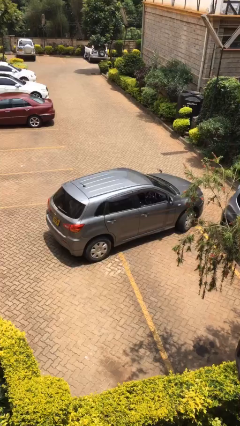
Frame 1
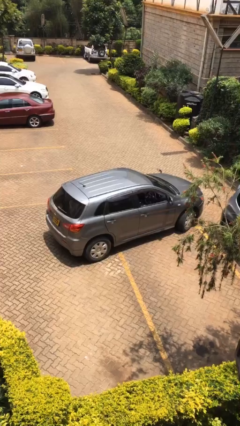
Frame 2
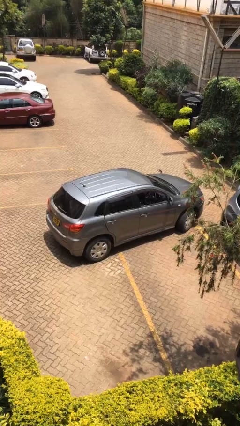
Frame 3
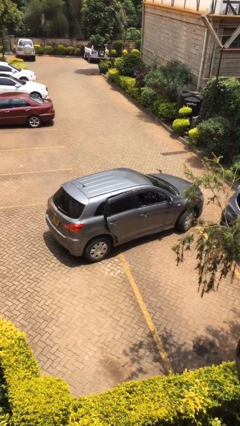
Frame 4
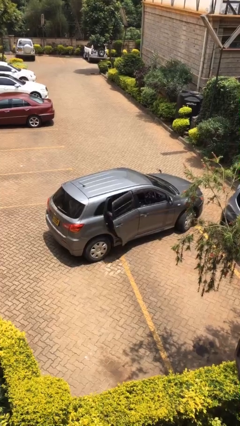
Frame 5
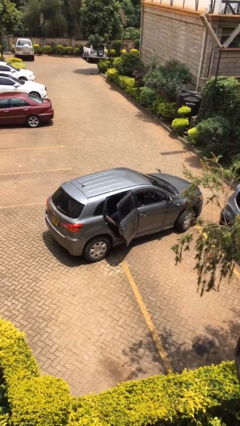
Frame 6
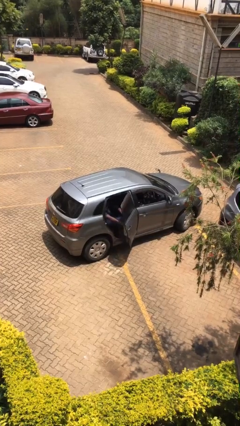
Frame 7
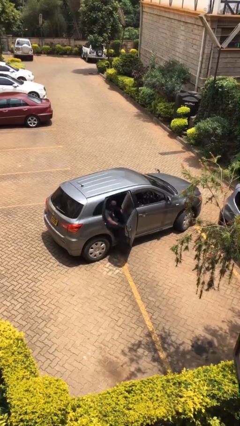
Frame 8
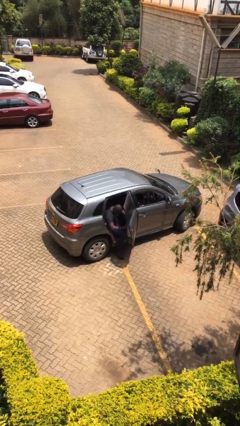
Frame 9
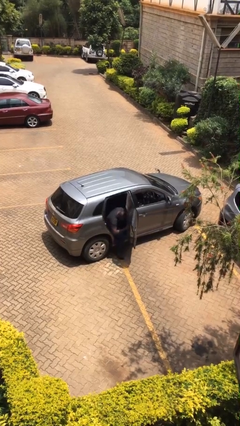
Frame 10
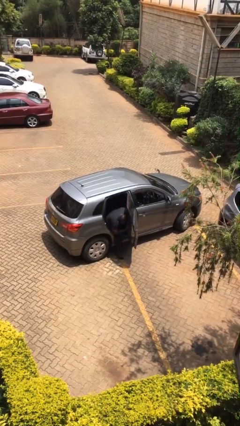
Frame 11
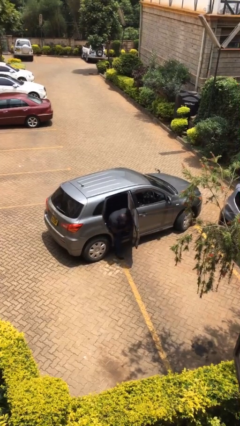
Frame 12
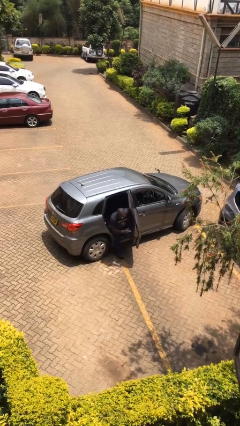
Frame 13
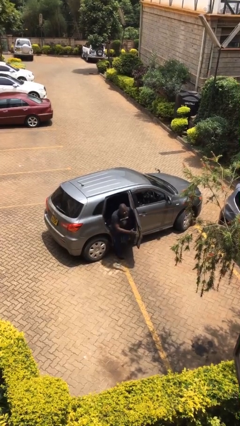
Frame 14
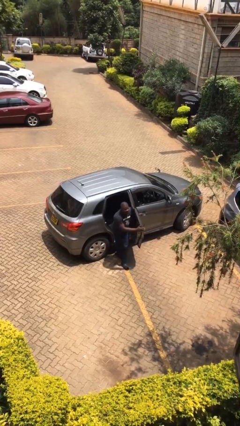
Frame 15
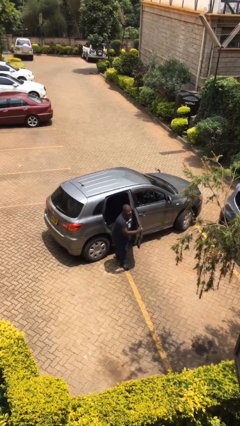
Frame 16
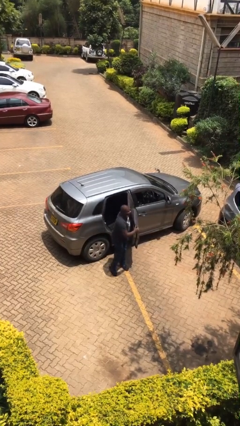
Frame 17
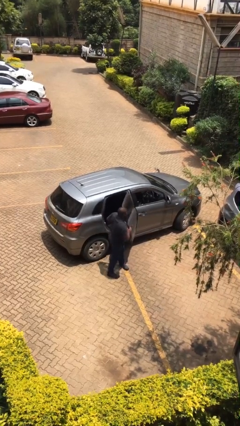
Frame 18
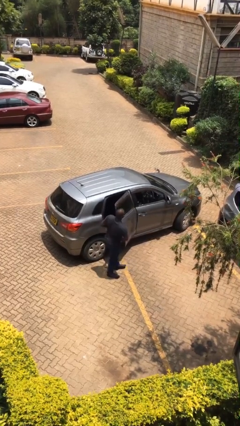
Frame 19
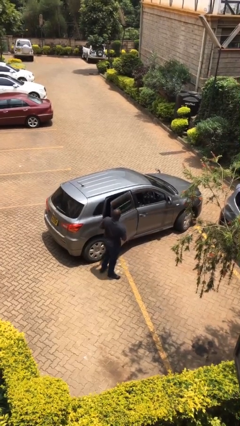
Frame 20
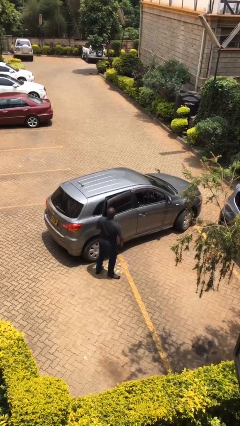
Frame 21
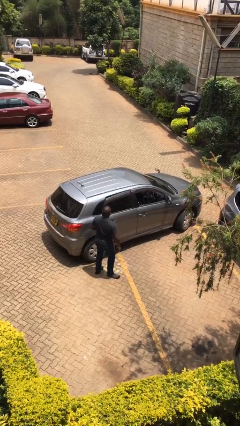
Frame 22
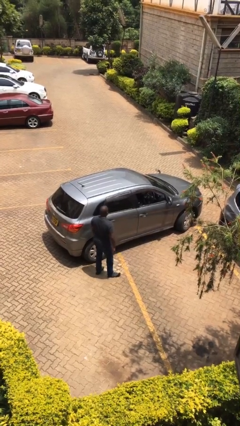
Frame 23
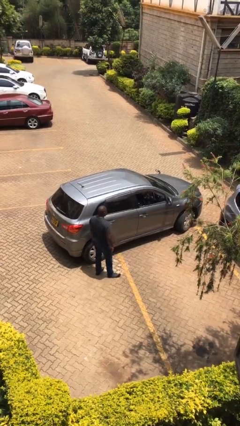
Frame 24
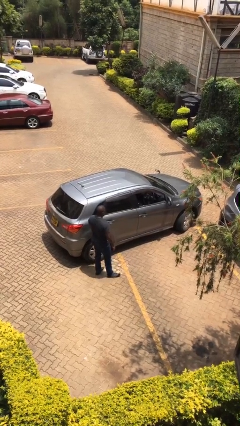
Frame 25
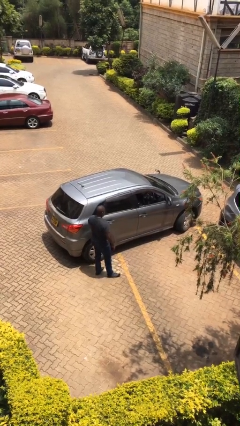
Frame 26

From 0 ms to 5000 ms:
car drops off person

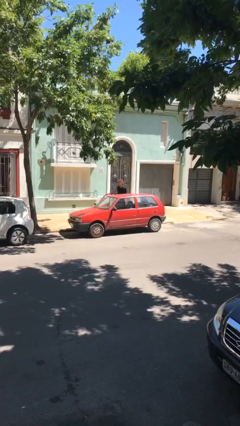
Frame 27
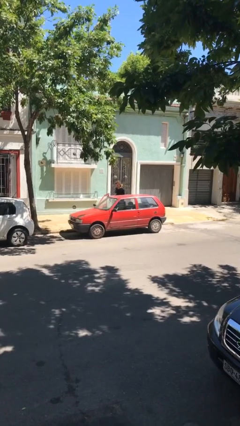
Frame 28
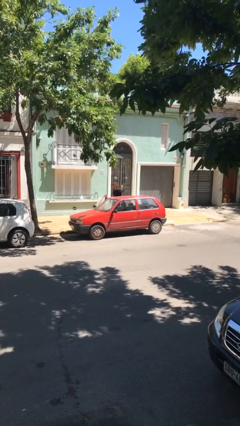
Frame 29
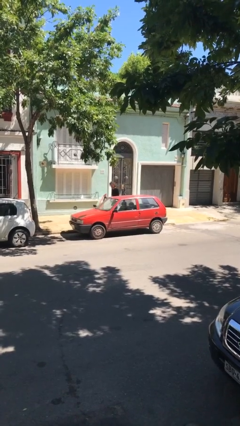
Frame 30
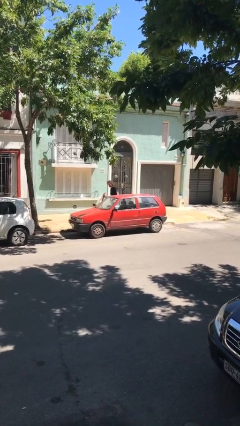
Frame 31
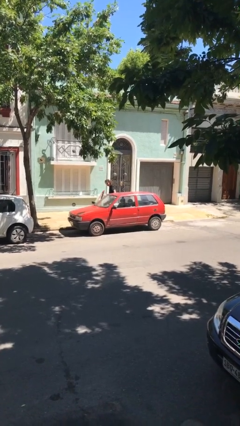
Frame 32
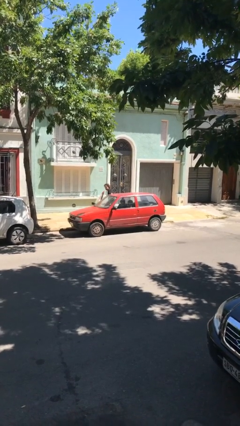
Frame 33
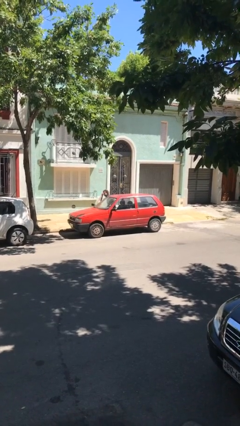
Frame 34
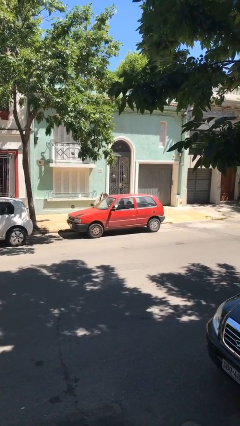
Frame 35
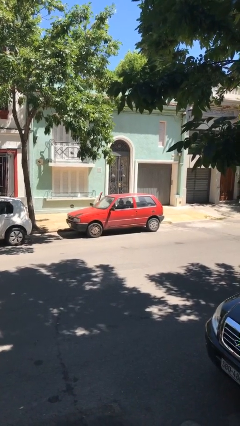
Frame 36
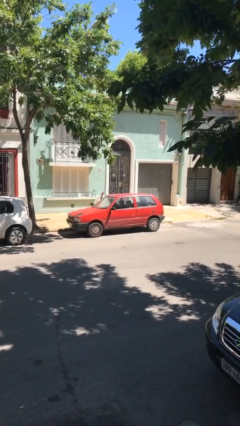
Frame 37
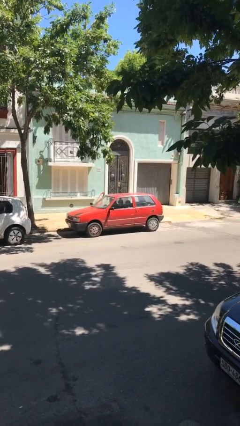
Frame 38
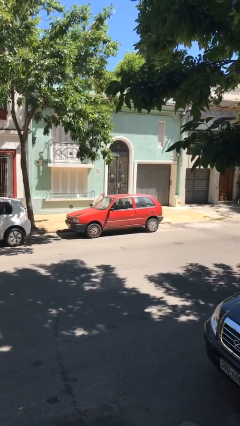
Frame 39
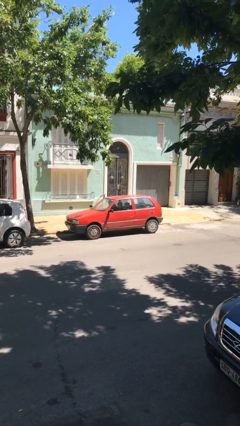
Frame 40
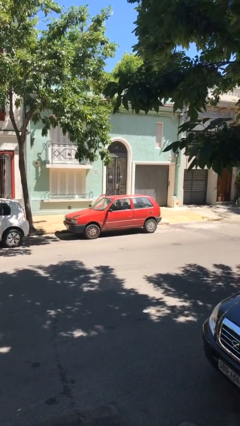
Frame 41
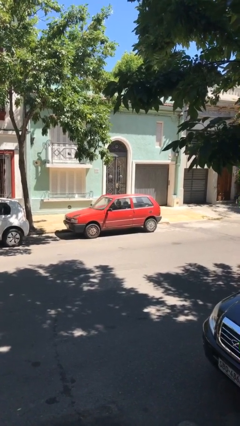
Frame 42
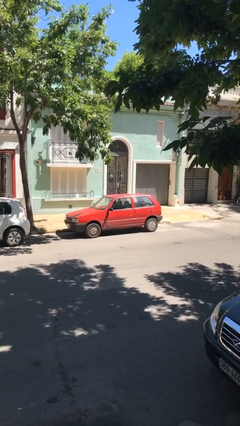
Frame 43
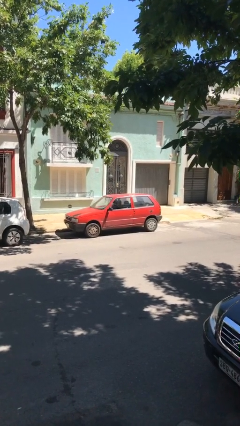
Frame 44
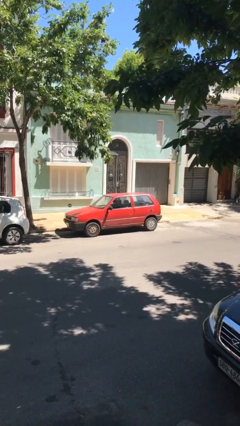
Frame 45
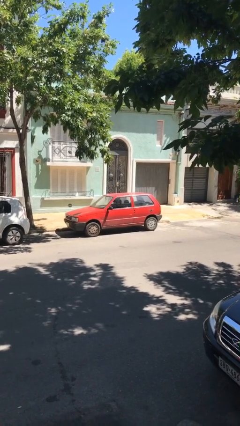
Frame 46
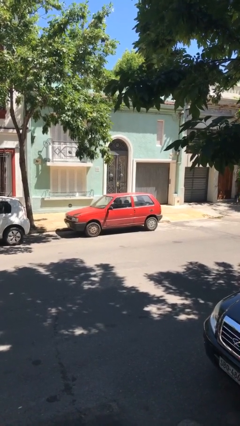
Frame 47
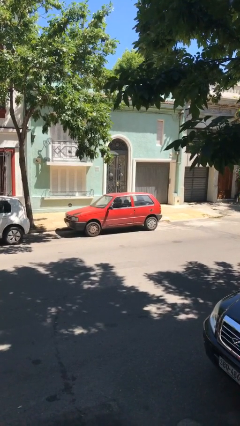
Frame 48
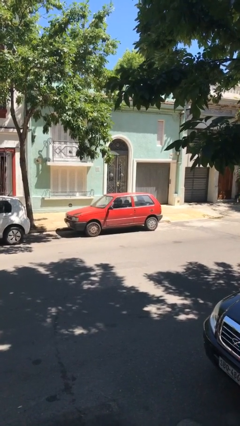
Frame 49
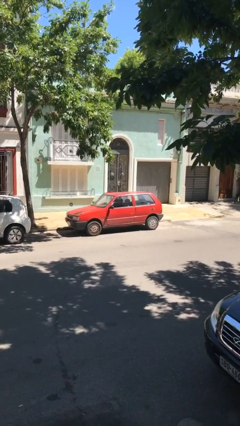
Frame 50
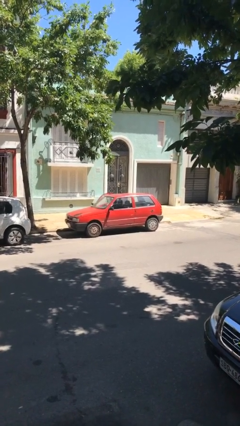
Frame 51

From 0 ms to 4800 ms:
car picks up person

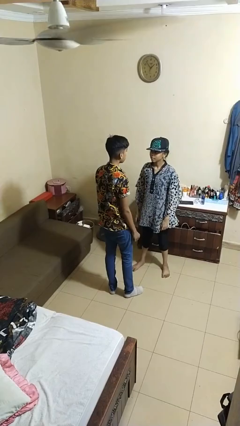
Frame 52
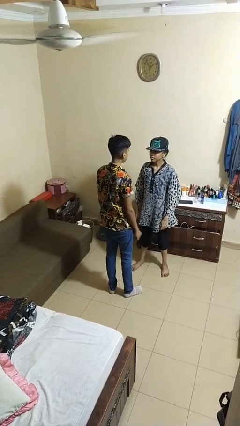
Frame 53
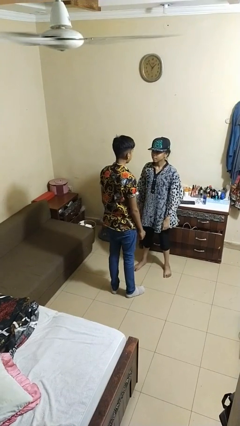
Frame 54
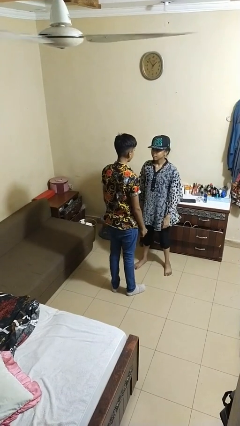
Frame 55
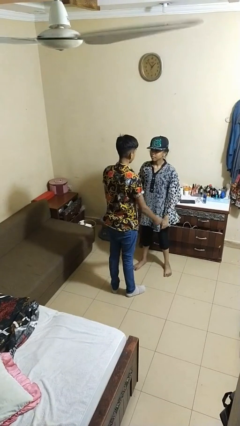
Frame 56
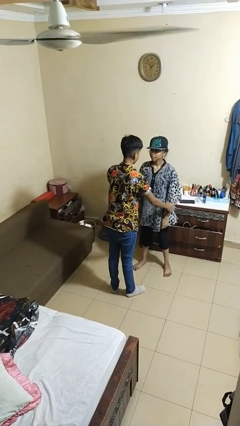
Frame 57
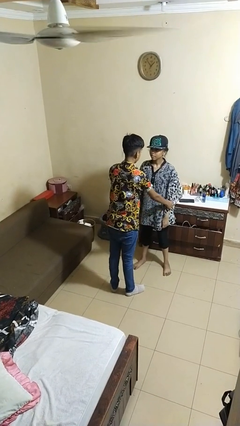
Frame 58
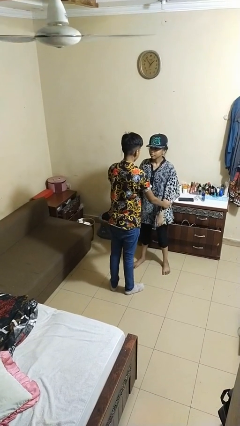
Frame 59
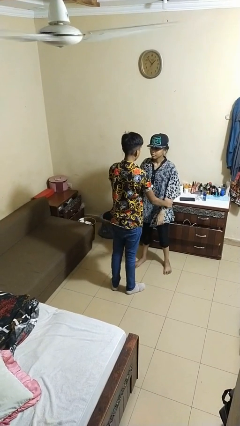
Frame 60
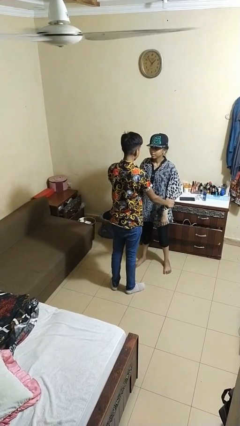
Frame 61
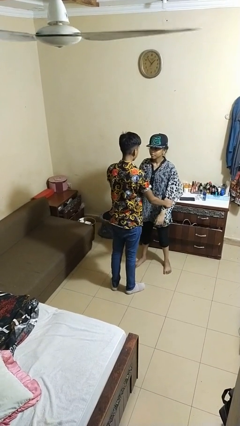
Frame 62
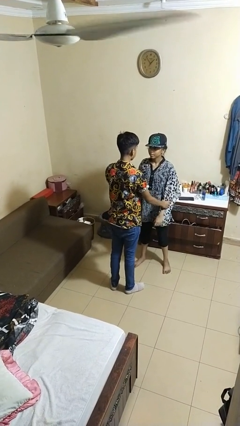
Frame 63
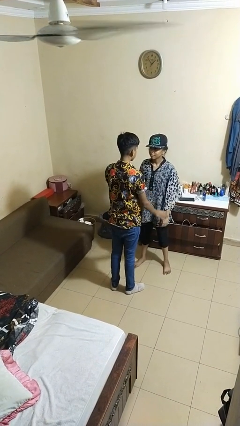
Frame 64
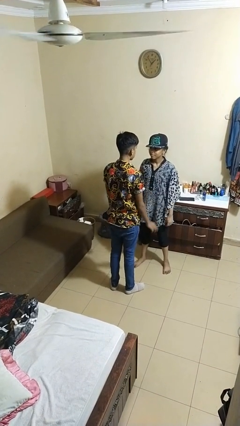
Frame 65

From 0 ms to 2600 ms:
person grabs person by forearm

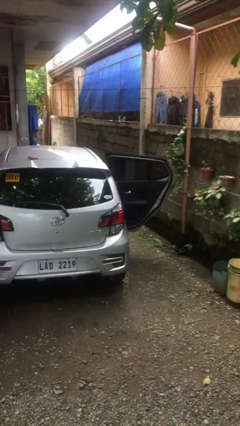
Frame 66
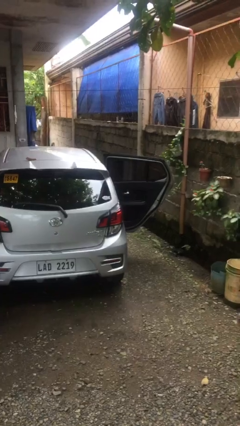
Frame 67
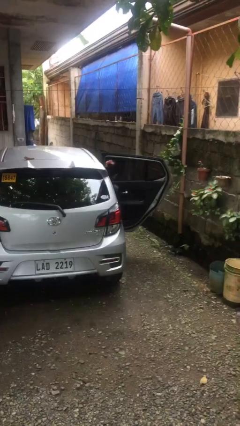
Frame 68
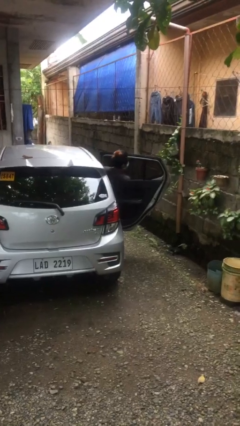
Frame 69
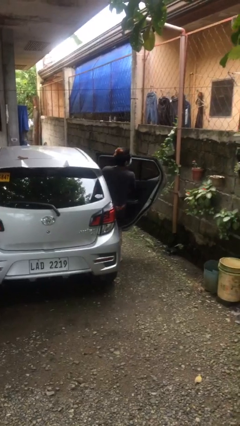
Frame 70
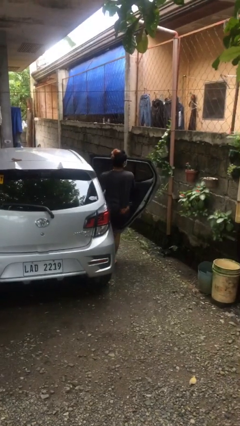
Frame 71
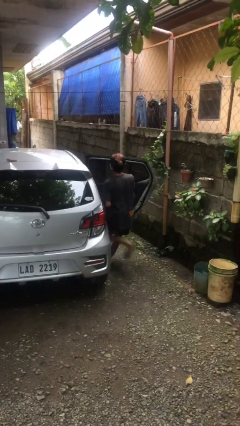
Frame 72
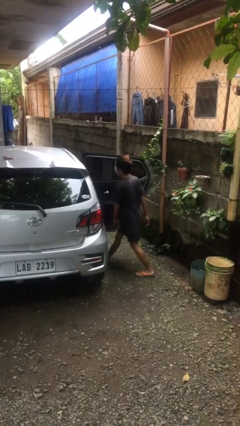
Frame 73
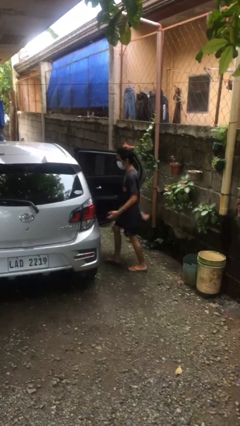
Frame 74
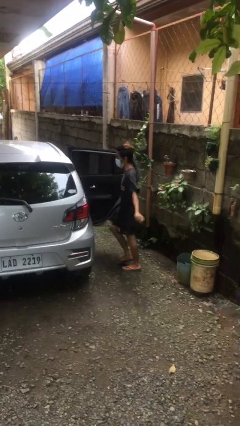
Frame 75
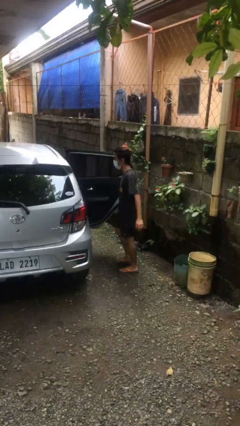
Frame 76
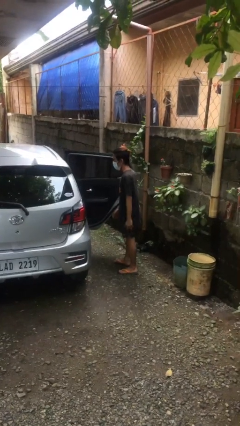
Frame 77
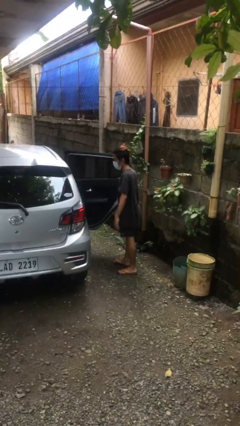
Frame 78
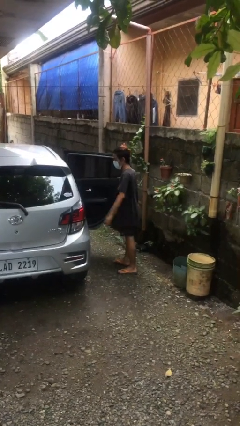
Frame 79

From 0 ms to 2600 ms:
person exits car

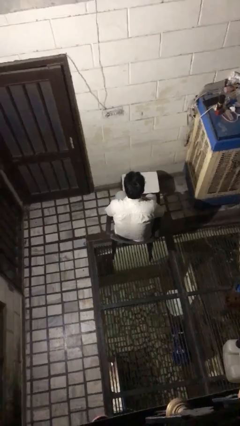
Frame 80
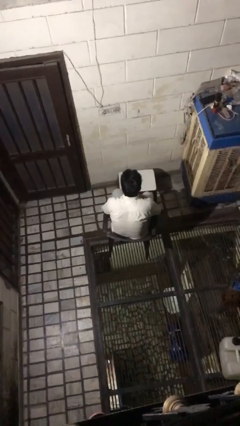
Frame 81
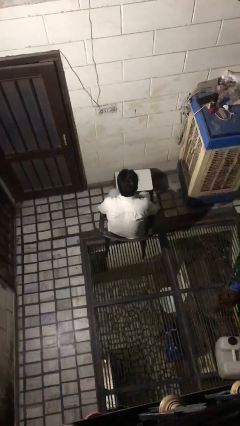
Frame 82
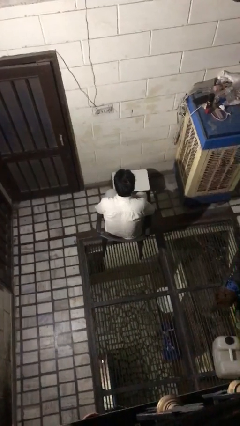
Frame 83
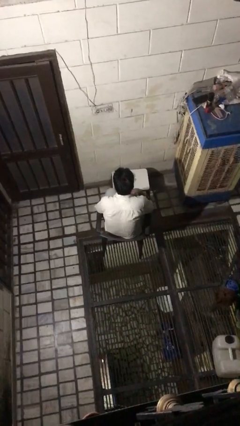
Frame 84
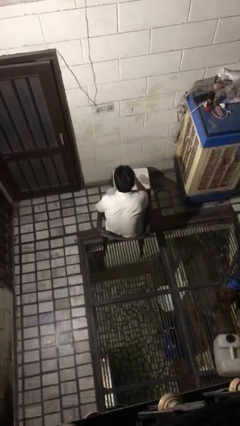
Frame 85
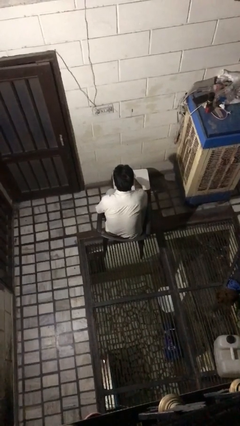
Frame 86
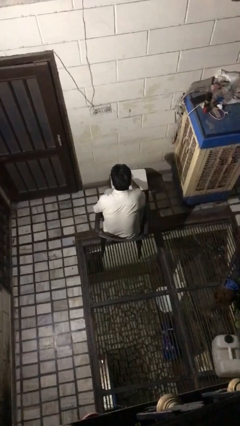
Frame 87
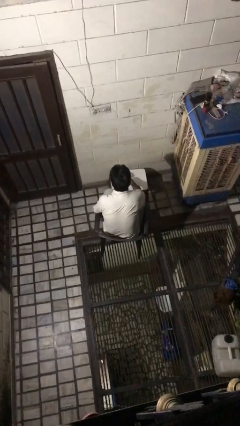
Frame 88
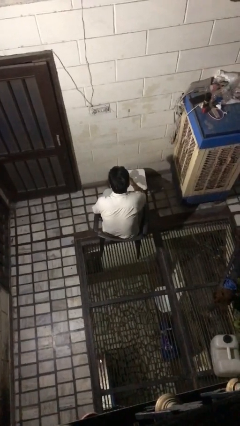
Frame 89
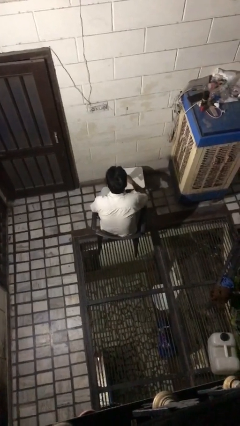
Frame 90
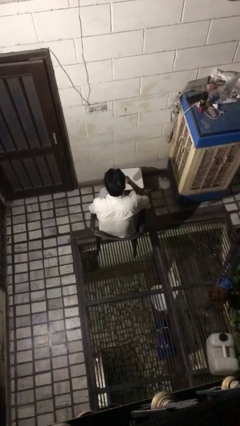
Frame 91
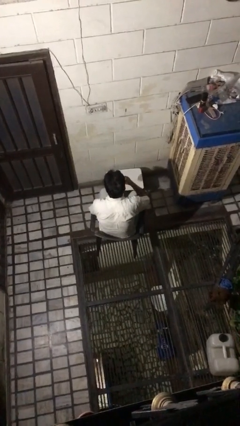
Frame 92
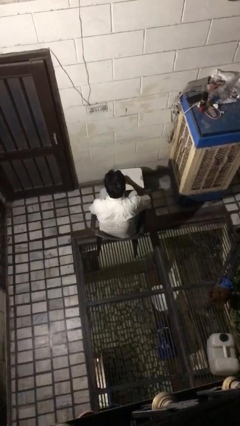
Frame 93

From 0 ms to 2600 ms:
person picks up object from table
